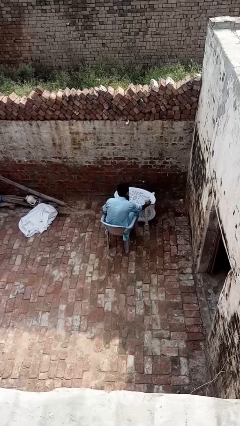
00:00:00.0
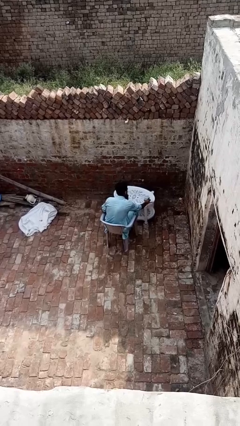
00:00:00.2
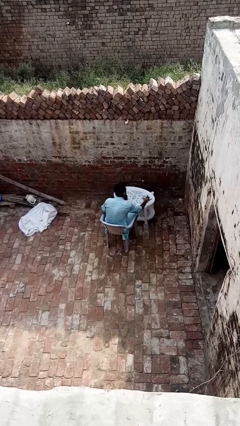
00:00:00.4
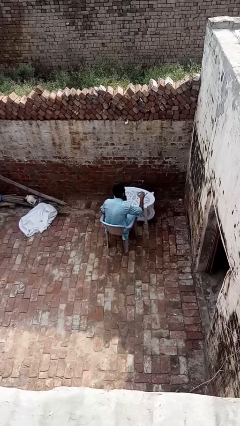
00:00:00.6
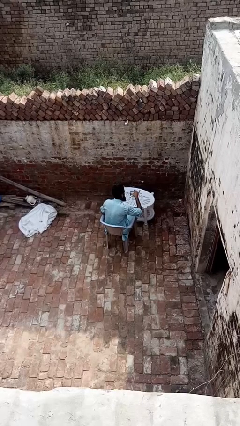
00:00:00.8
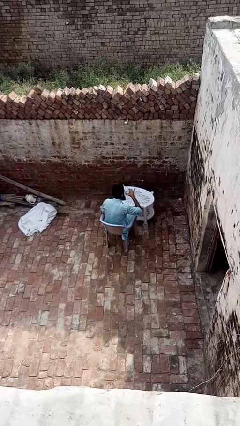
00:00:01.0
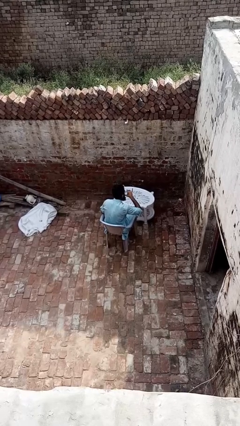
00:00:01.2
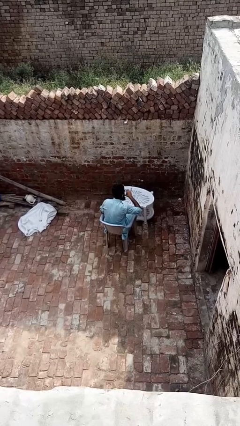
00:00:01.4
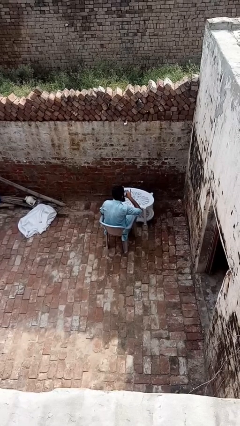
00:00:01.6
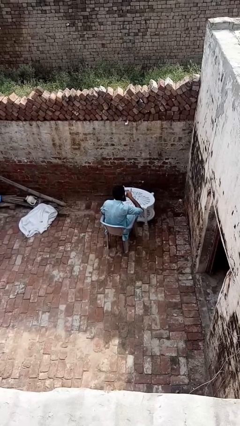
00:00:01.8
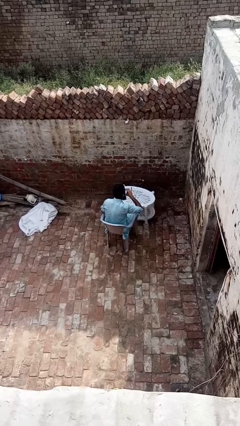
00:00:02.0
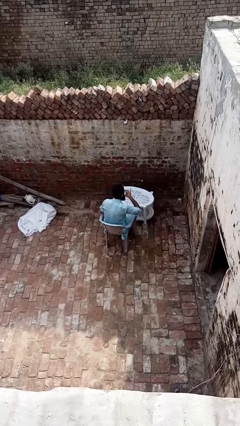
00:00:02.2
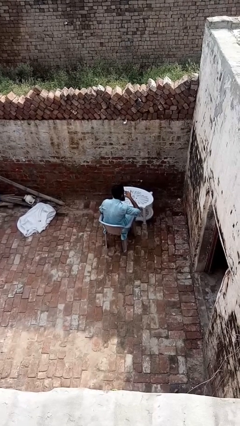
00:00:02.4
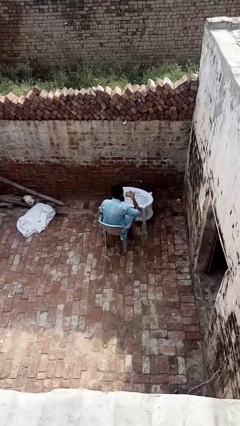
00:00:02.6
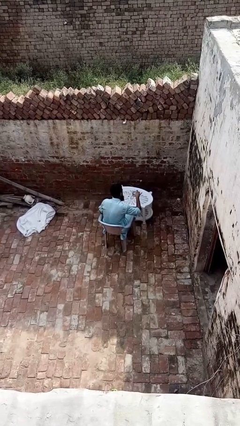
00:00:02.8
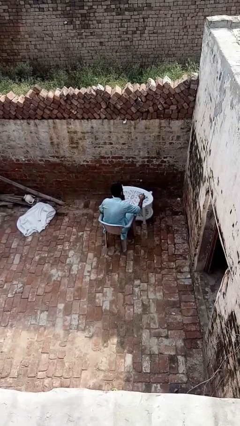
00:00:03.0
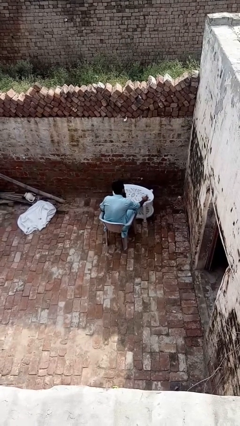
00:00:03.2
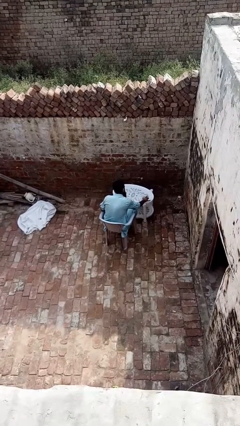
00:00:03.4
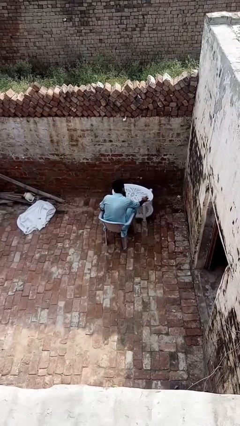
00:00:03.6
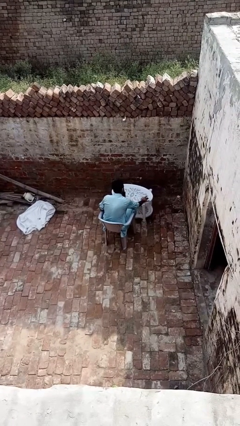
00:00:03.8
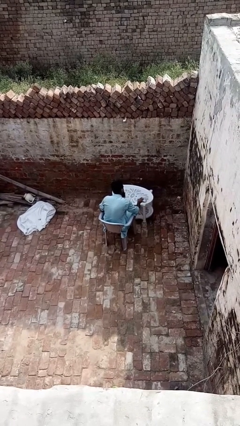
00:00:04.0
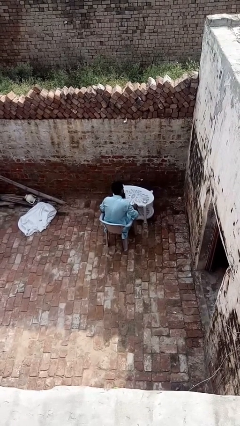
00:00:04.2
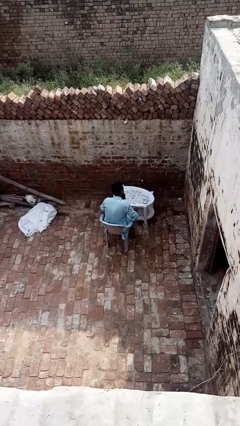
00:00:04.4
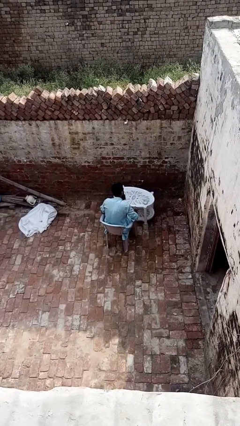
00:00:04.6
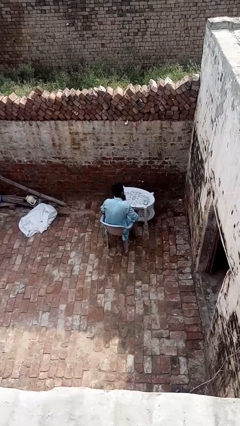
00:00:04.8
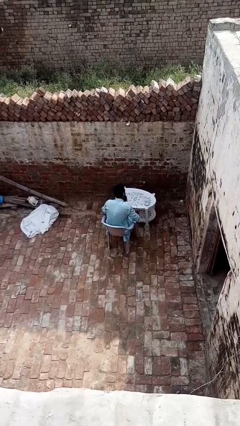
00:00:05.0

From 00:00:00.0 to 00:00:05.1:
person drinks from cup

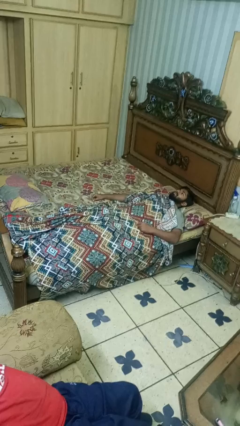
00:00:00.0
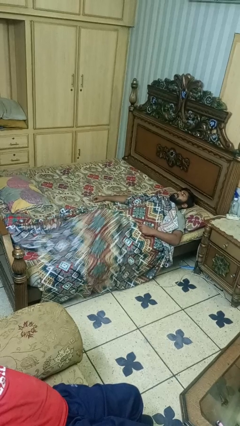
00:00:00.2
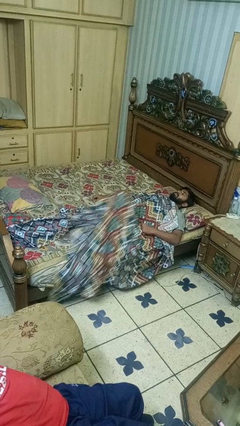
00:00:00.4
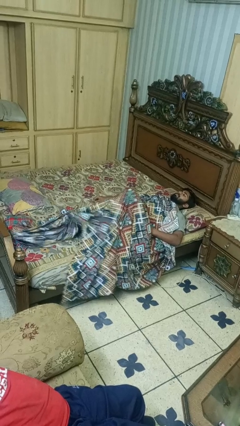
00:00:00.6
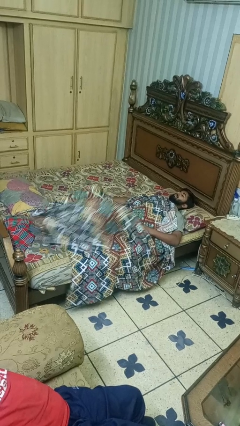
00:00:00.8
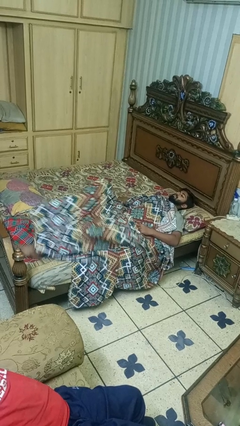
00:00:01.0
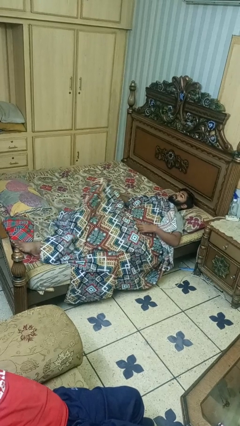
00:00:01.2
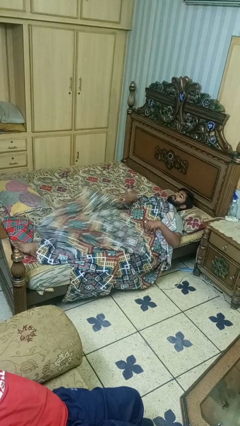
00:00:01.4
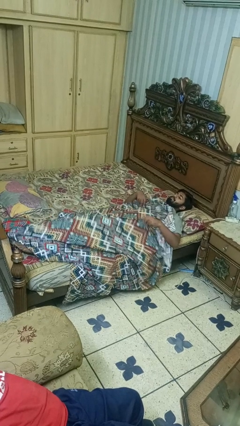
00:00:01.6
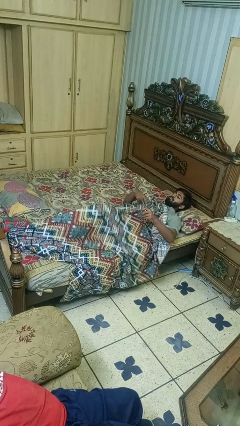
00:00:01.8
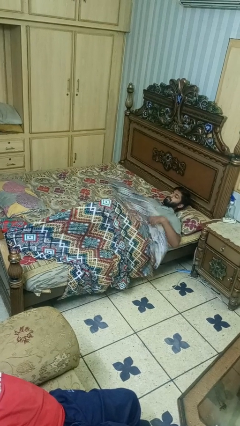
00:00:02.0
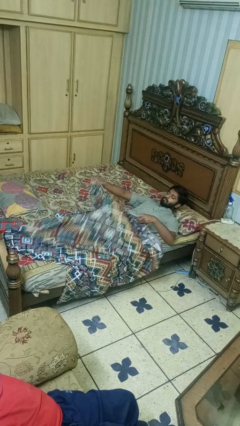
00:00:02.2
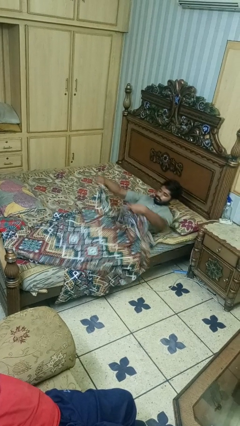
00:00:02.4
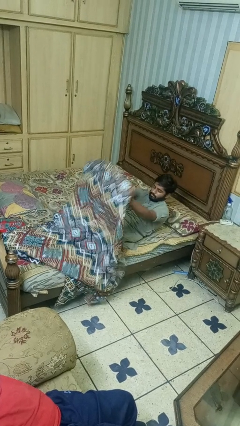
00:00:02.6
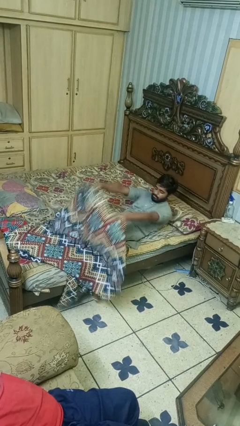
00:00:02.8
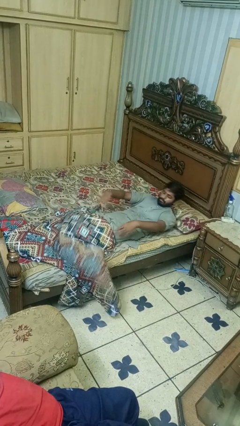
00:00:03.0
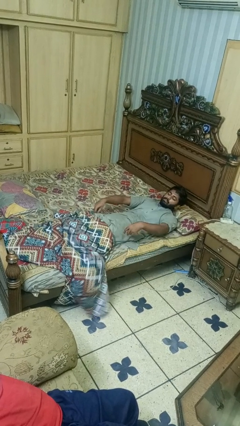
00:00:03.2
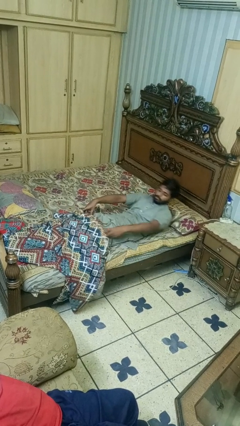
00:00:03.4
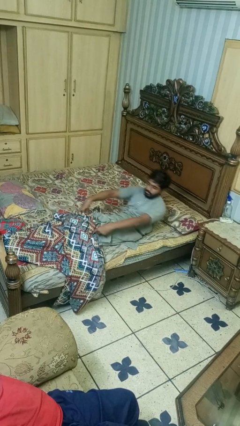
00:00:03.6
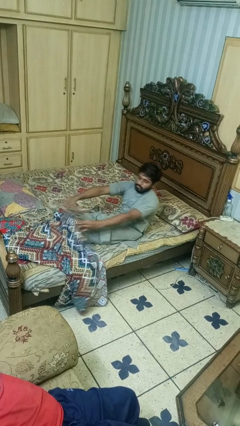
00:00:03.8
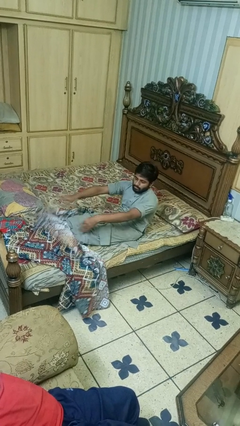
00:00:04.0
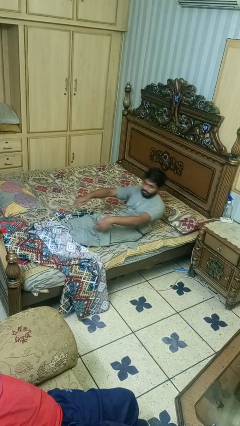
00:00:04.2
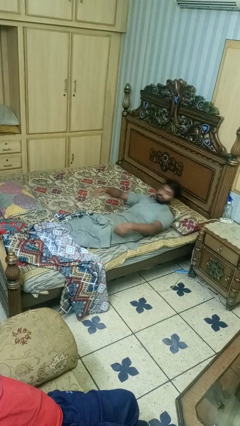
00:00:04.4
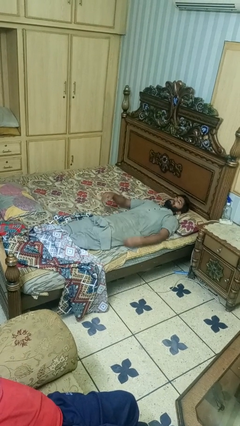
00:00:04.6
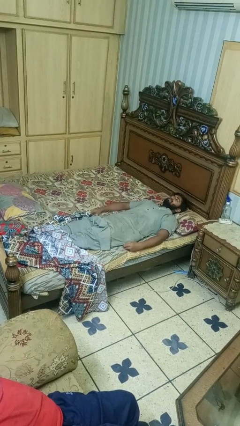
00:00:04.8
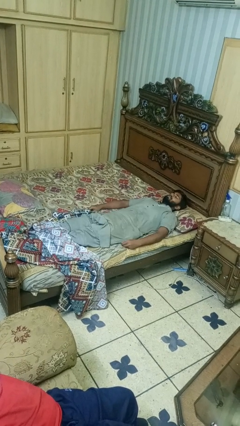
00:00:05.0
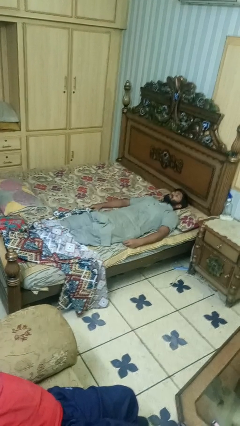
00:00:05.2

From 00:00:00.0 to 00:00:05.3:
person uncovers with bedsheets

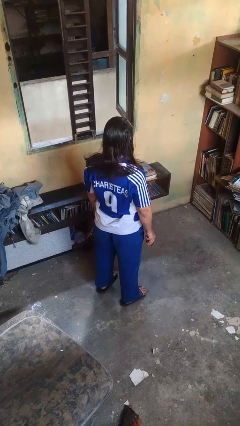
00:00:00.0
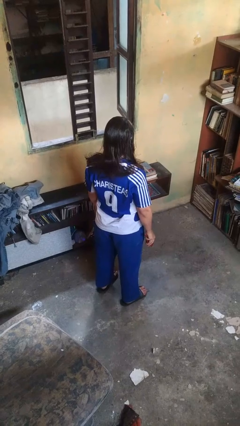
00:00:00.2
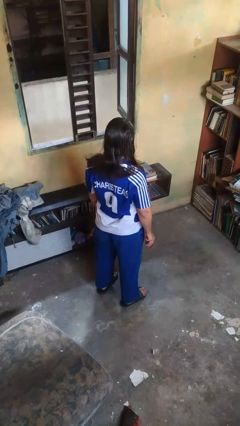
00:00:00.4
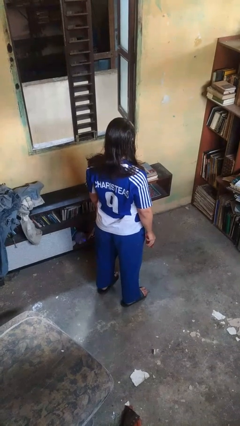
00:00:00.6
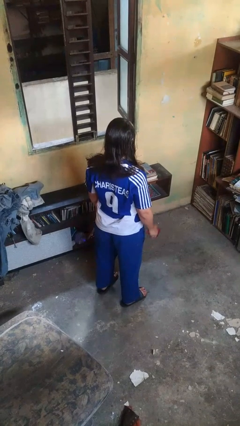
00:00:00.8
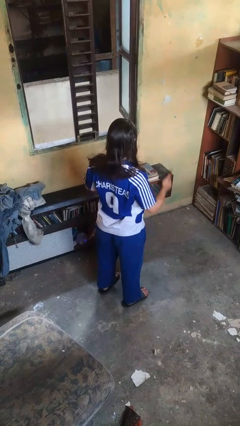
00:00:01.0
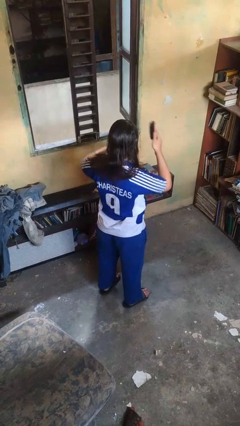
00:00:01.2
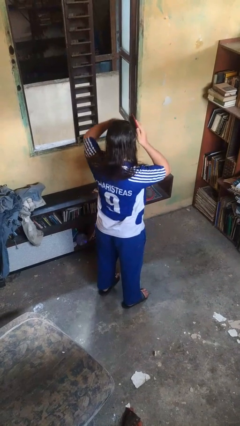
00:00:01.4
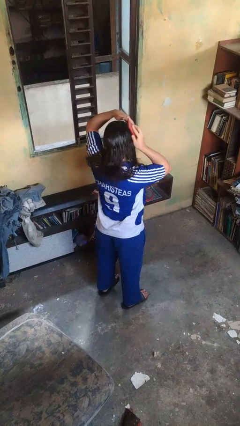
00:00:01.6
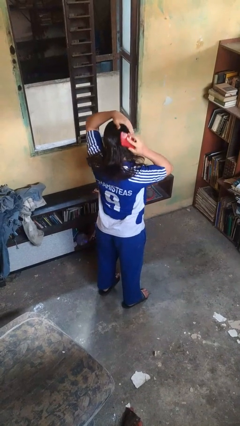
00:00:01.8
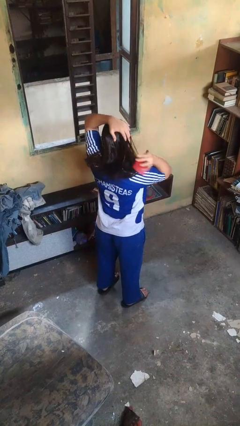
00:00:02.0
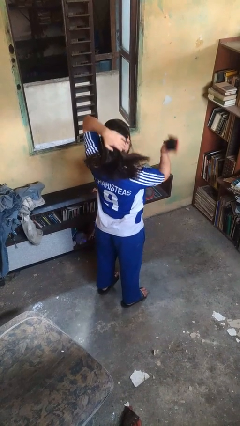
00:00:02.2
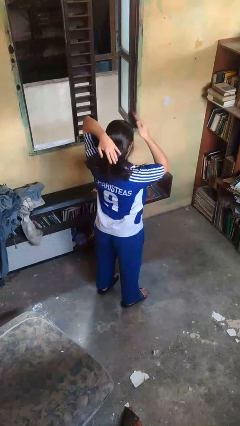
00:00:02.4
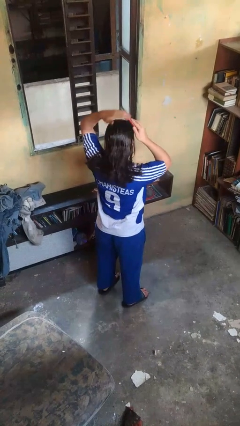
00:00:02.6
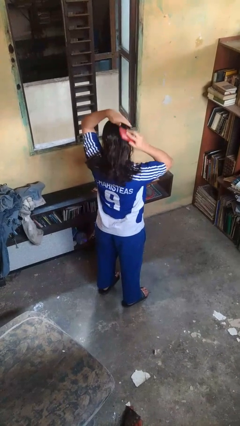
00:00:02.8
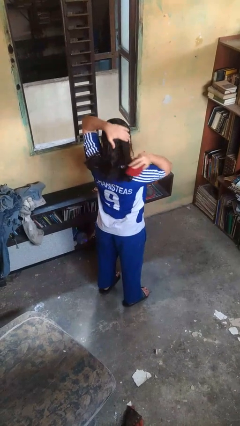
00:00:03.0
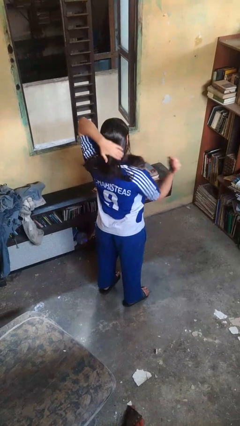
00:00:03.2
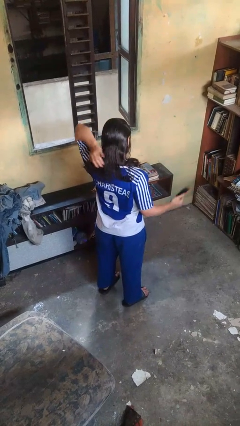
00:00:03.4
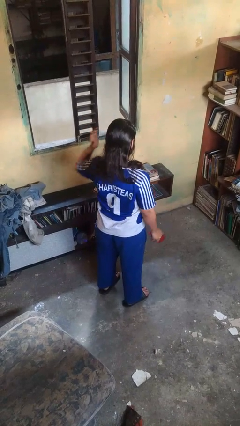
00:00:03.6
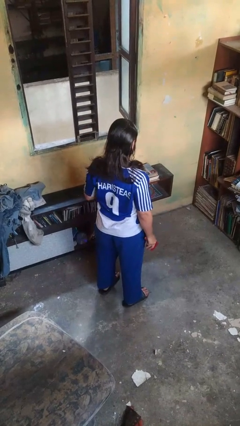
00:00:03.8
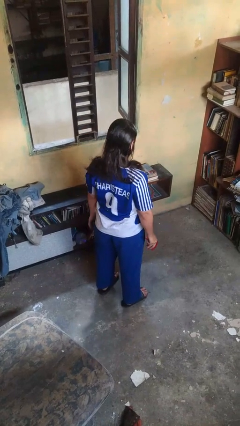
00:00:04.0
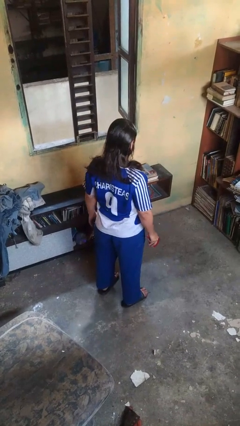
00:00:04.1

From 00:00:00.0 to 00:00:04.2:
person brushes hair

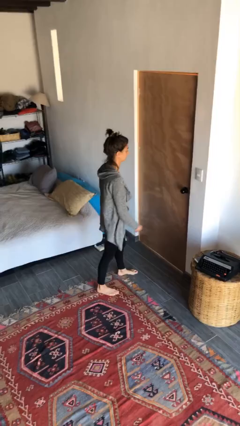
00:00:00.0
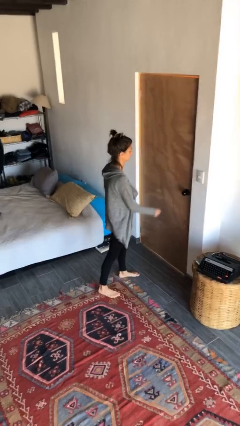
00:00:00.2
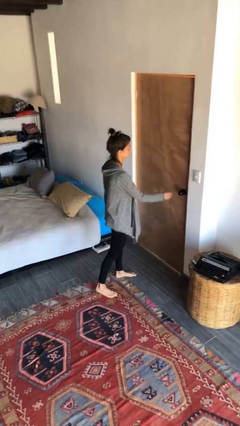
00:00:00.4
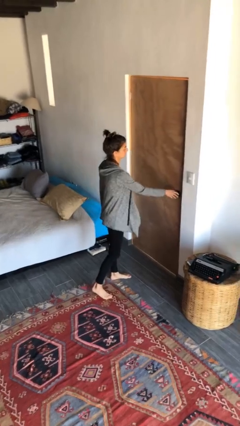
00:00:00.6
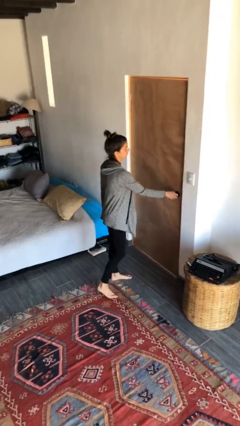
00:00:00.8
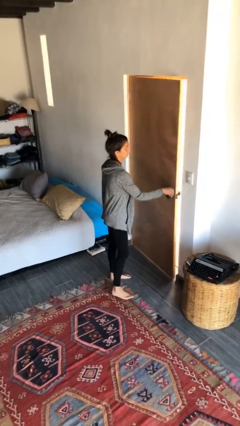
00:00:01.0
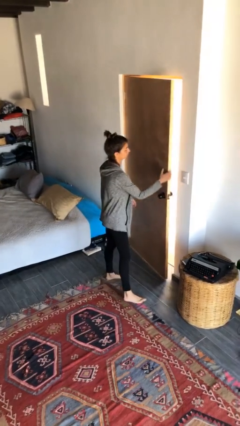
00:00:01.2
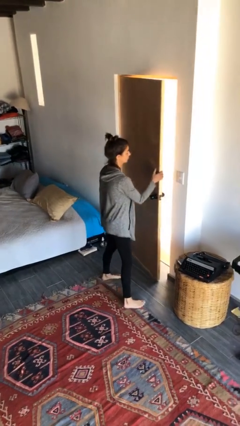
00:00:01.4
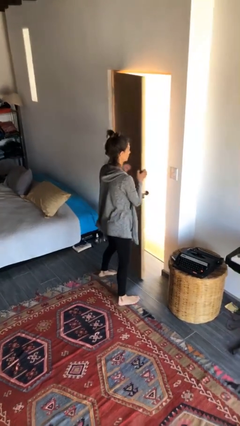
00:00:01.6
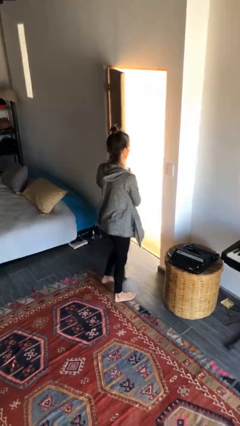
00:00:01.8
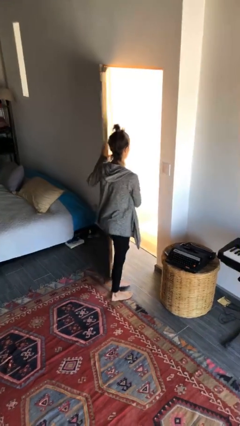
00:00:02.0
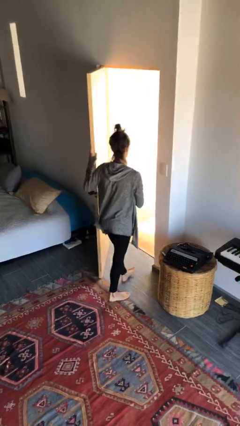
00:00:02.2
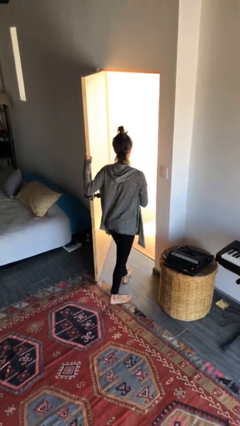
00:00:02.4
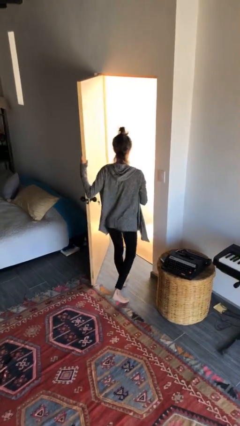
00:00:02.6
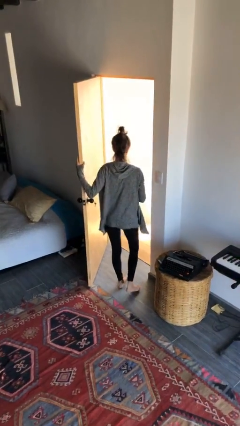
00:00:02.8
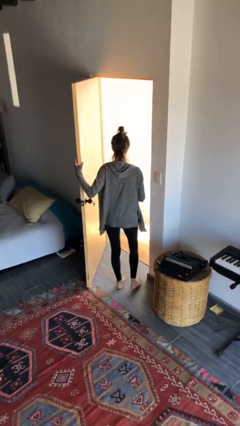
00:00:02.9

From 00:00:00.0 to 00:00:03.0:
person opens facility door

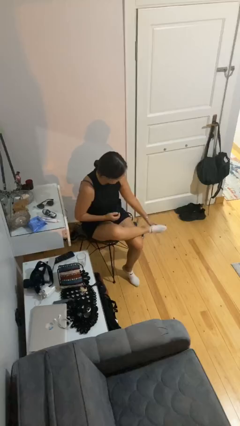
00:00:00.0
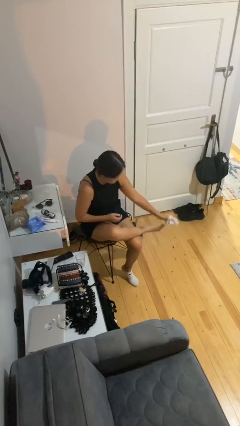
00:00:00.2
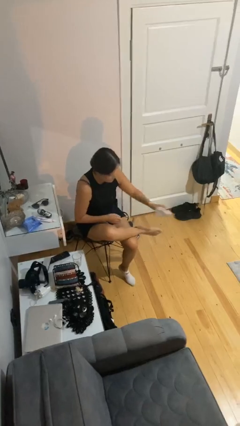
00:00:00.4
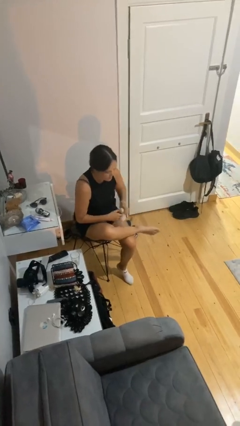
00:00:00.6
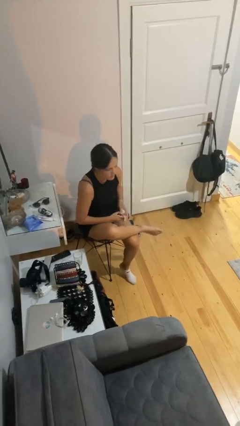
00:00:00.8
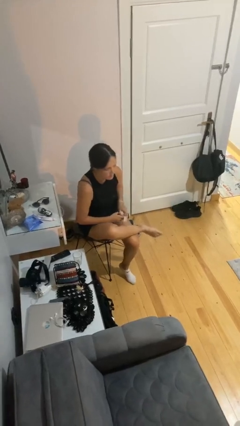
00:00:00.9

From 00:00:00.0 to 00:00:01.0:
person takes off socks
